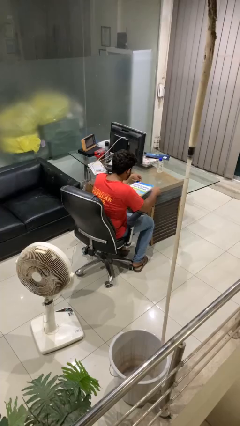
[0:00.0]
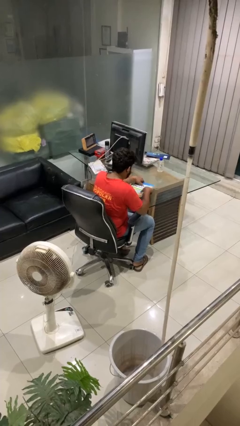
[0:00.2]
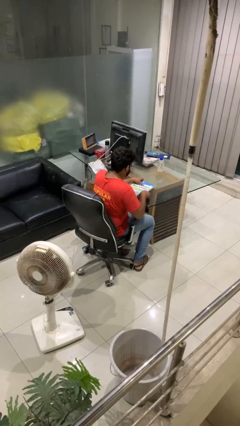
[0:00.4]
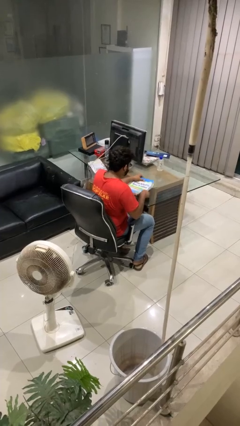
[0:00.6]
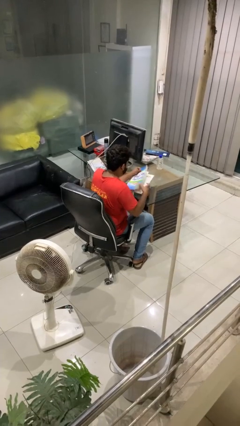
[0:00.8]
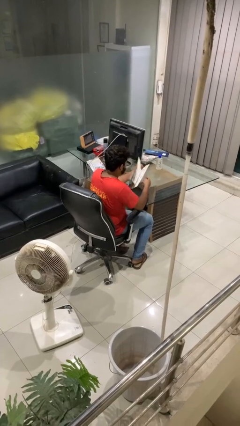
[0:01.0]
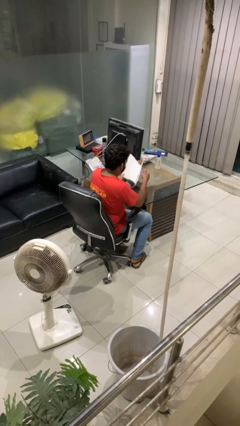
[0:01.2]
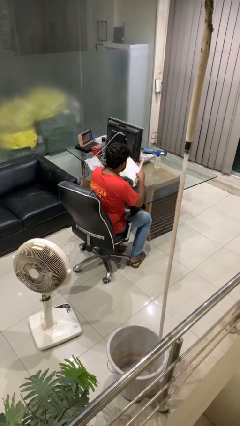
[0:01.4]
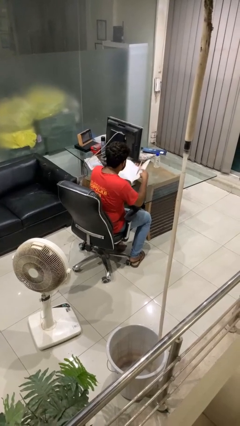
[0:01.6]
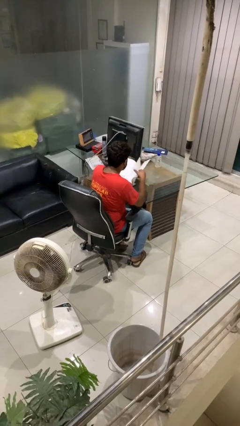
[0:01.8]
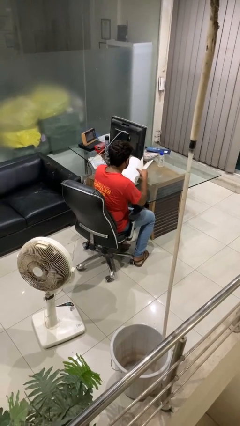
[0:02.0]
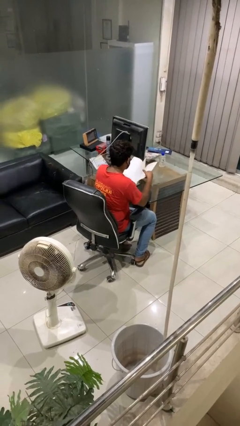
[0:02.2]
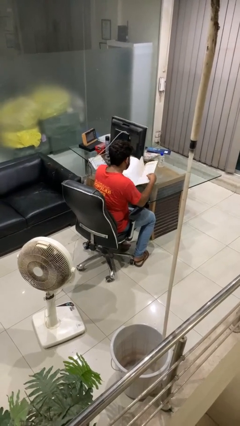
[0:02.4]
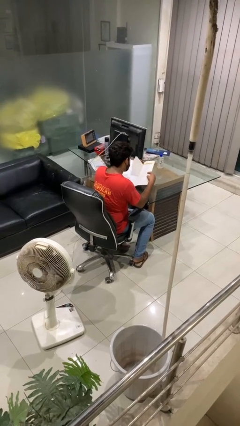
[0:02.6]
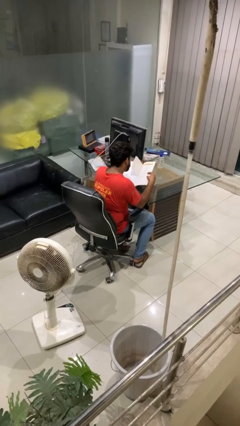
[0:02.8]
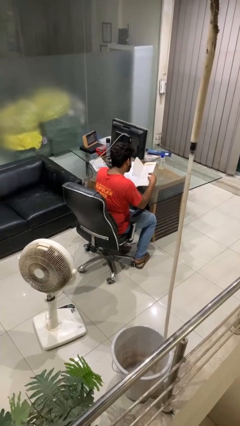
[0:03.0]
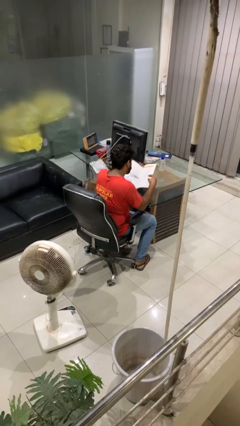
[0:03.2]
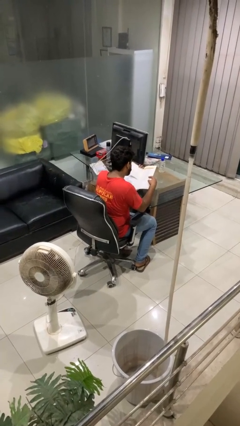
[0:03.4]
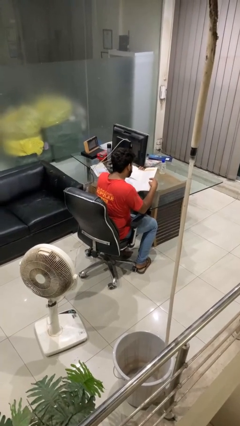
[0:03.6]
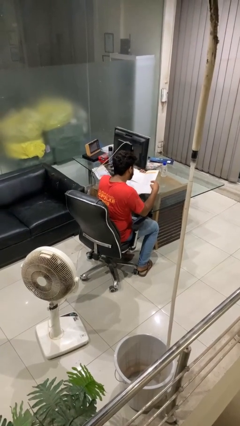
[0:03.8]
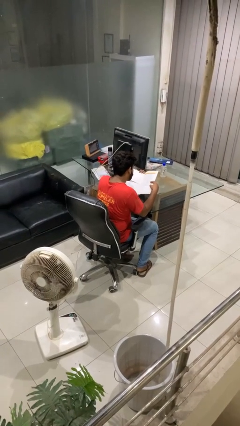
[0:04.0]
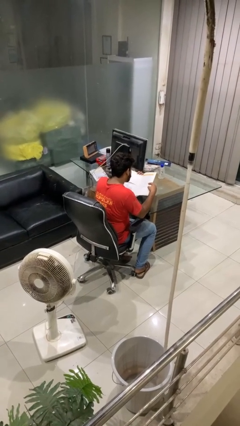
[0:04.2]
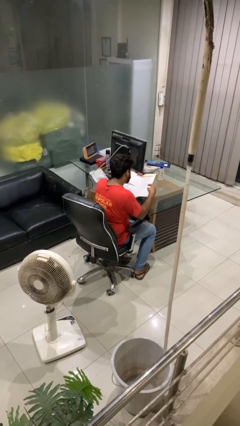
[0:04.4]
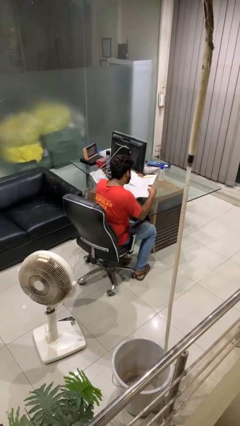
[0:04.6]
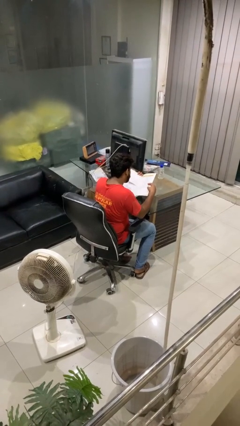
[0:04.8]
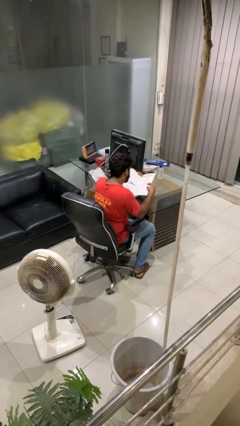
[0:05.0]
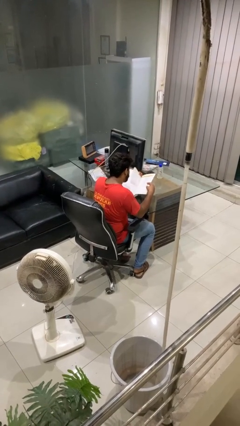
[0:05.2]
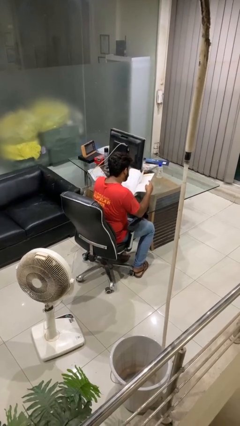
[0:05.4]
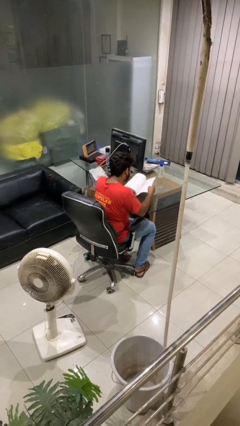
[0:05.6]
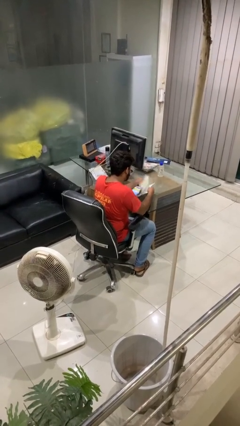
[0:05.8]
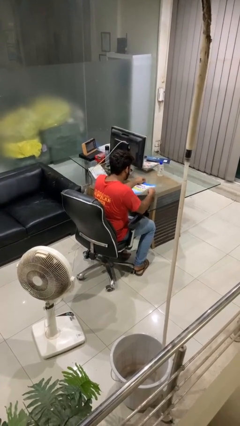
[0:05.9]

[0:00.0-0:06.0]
person reads book

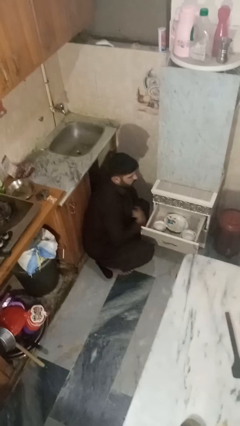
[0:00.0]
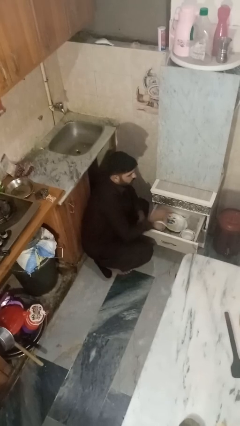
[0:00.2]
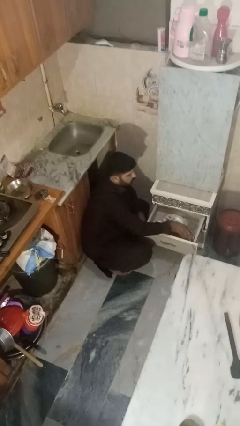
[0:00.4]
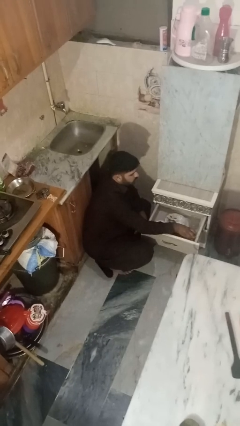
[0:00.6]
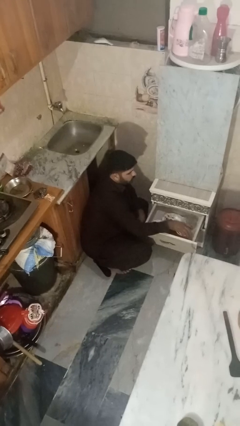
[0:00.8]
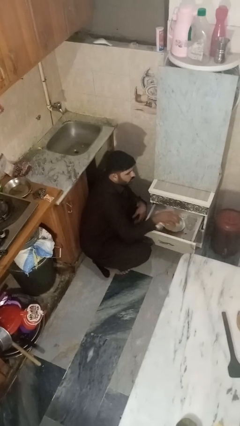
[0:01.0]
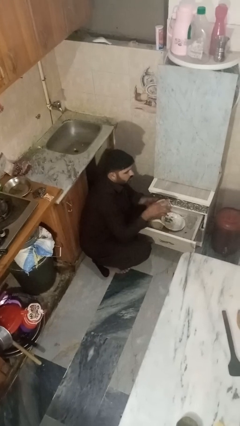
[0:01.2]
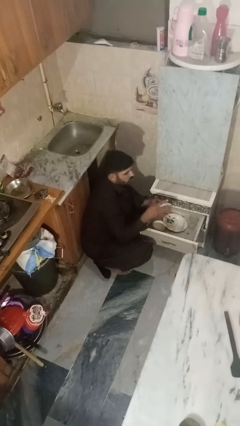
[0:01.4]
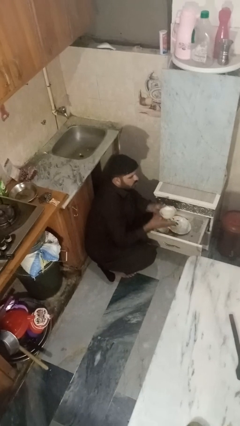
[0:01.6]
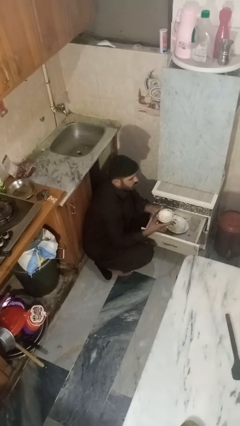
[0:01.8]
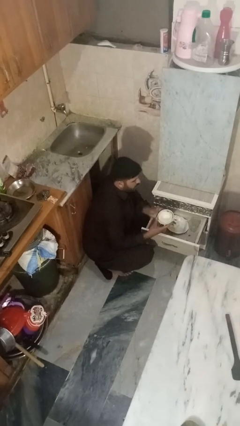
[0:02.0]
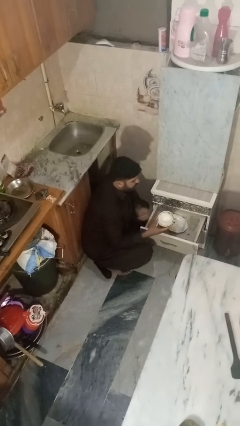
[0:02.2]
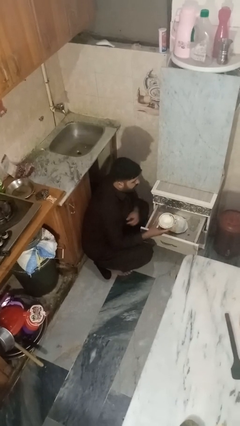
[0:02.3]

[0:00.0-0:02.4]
person takes object from kitchen drawer

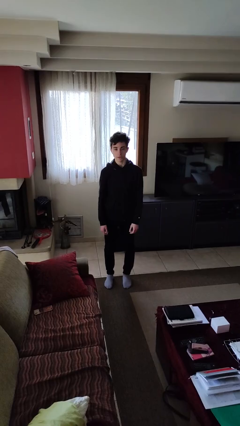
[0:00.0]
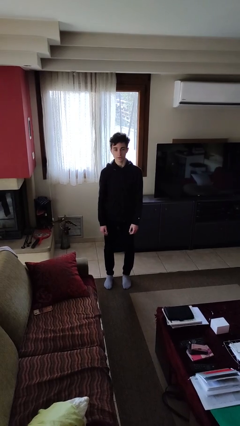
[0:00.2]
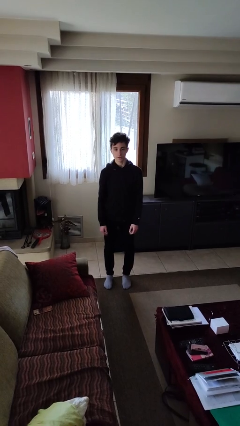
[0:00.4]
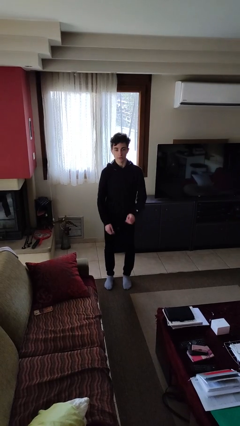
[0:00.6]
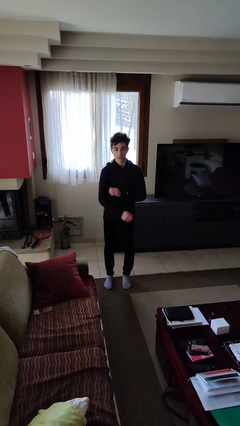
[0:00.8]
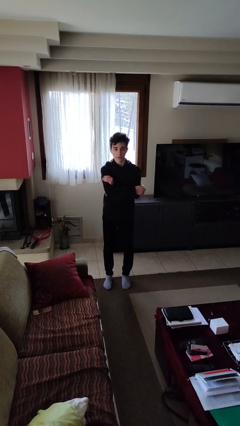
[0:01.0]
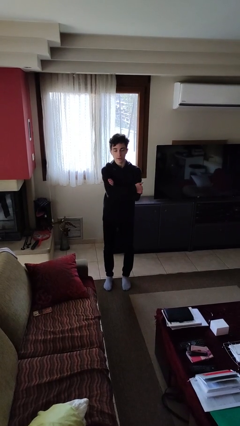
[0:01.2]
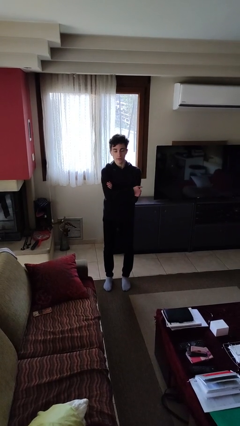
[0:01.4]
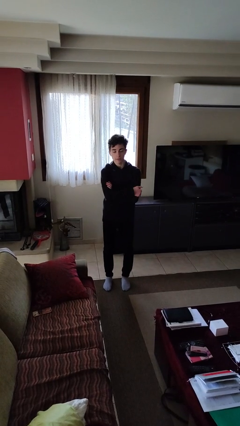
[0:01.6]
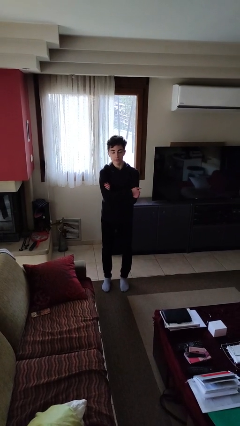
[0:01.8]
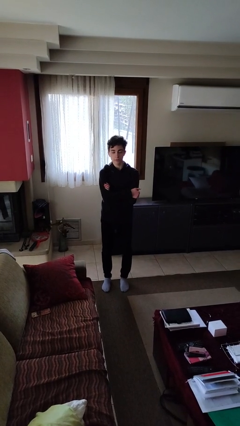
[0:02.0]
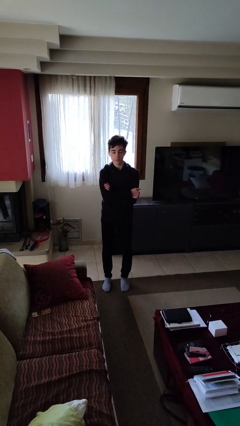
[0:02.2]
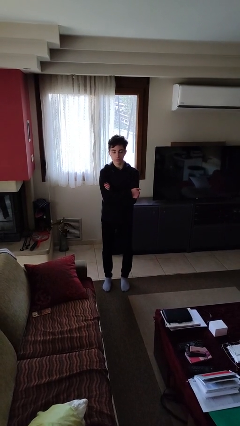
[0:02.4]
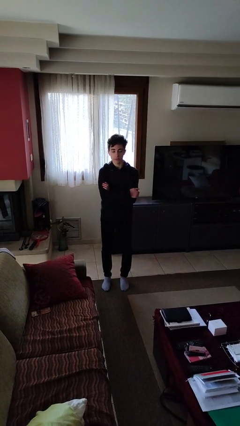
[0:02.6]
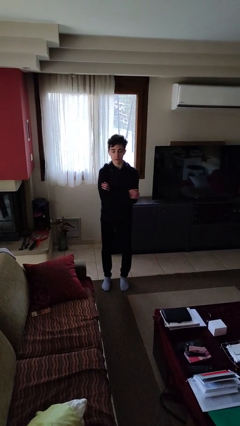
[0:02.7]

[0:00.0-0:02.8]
person crosses arms

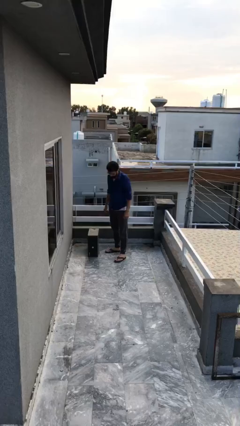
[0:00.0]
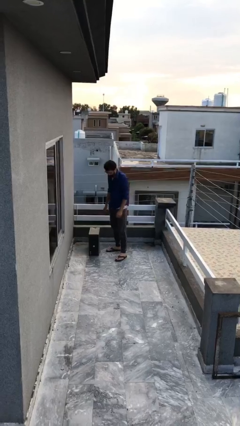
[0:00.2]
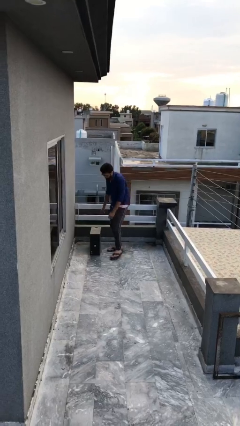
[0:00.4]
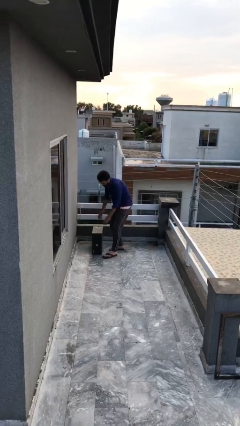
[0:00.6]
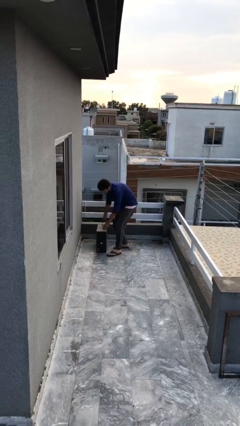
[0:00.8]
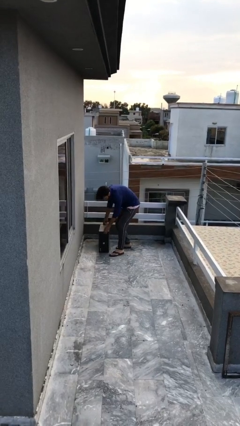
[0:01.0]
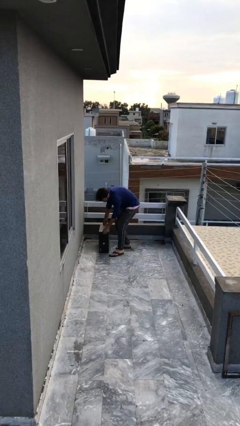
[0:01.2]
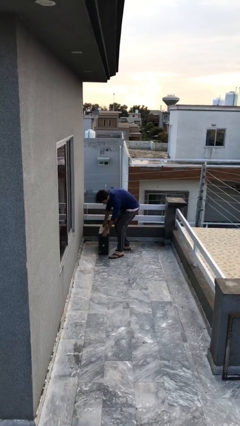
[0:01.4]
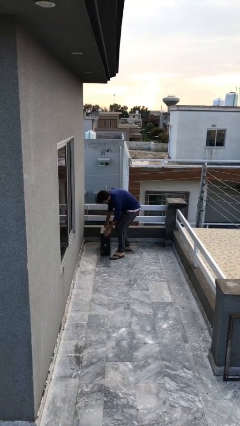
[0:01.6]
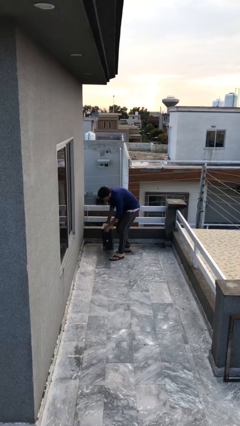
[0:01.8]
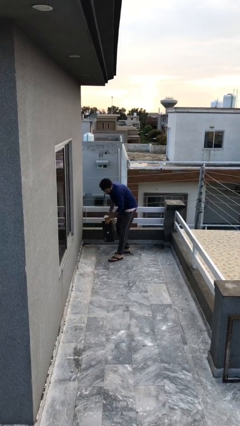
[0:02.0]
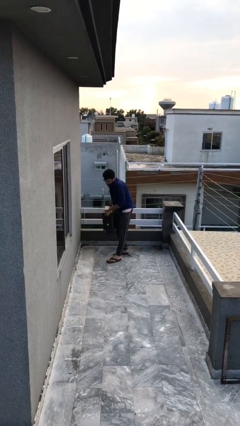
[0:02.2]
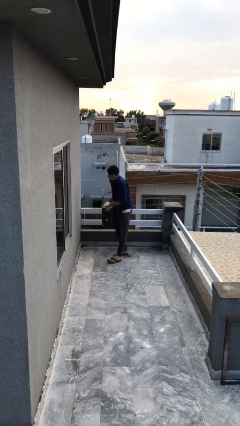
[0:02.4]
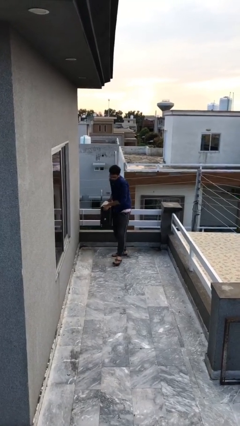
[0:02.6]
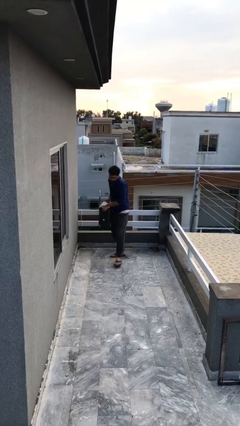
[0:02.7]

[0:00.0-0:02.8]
person picks up object from floor

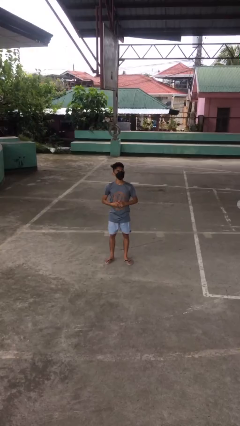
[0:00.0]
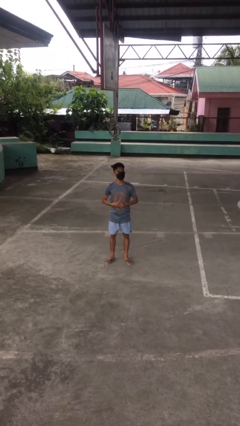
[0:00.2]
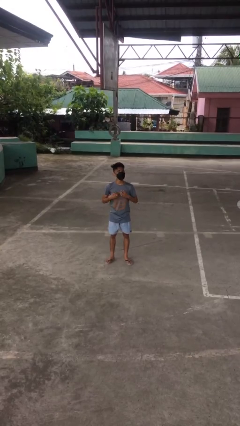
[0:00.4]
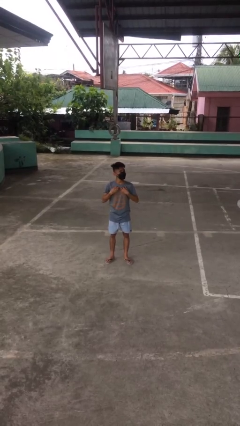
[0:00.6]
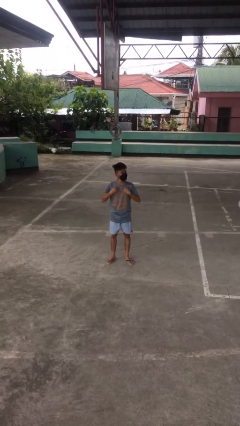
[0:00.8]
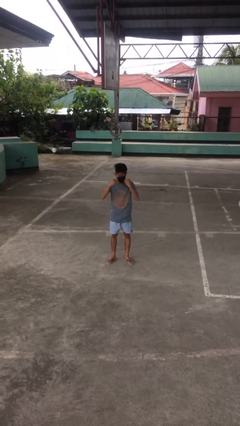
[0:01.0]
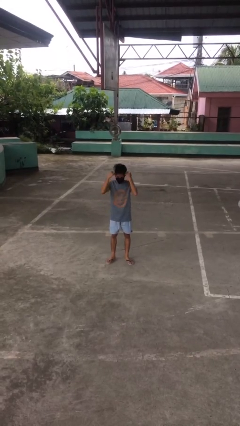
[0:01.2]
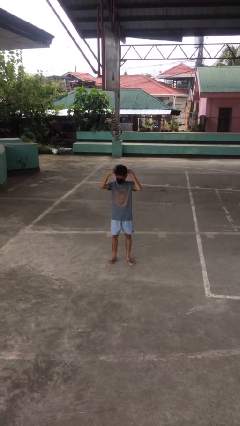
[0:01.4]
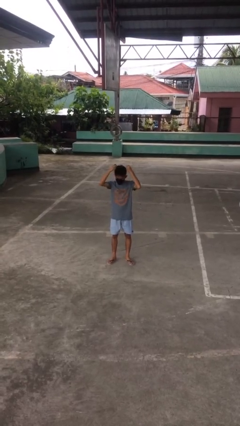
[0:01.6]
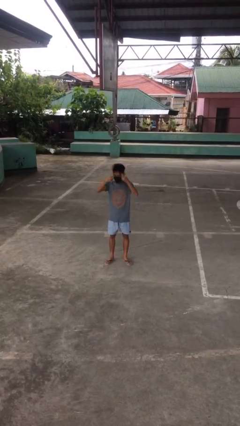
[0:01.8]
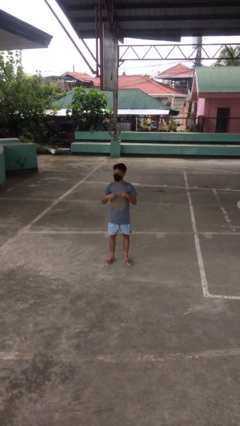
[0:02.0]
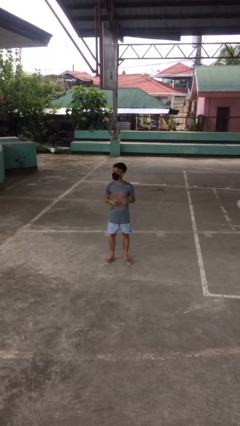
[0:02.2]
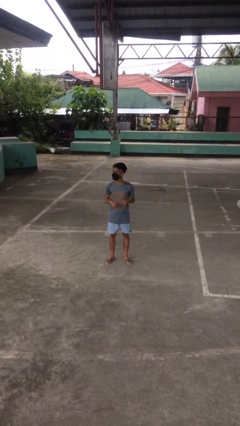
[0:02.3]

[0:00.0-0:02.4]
person takes off necklace

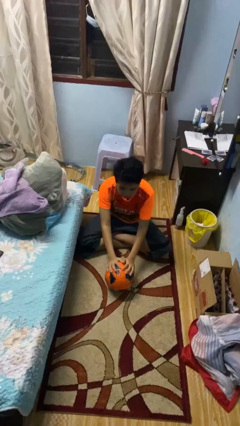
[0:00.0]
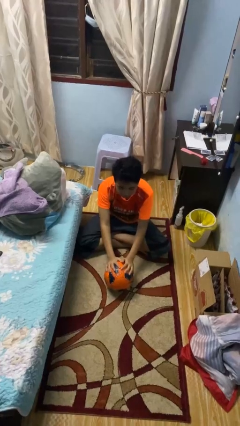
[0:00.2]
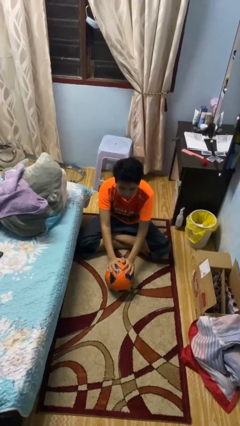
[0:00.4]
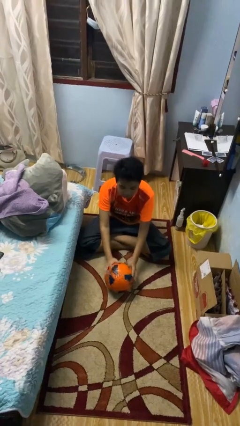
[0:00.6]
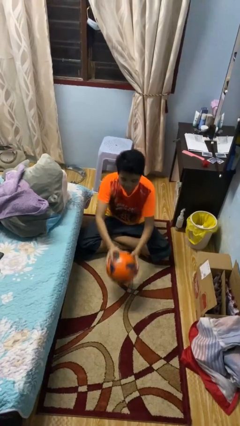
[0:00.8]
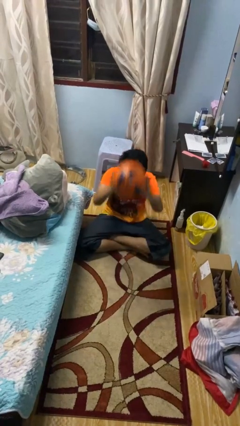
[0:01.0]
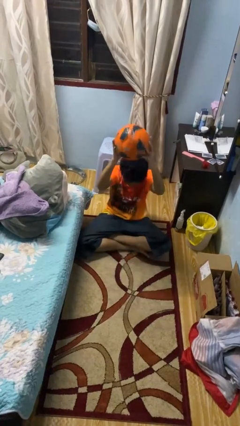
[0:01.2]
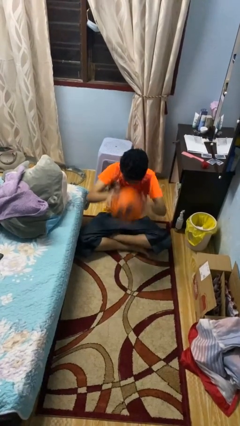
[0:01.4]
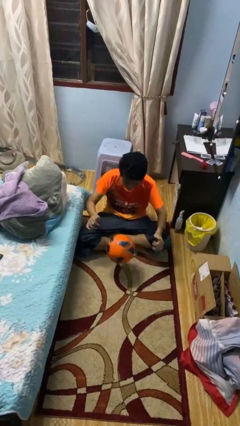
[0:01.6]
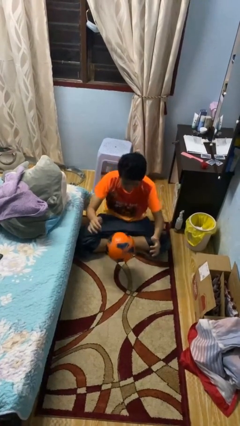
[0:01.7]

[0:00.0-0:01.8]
person bounces ball on floor
